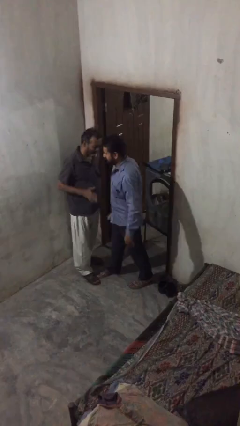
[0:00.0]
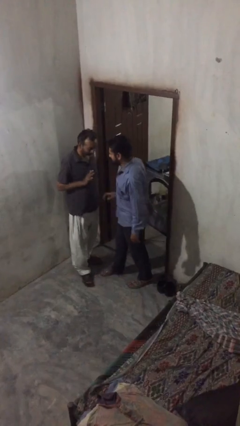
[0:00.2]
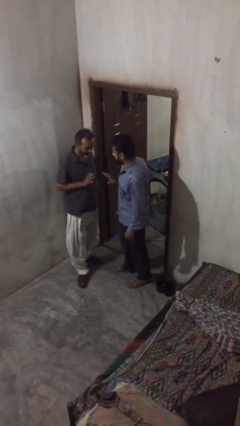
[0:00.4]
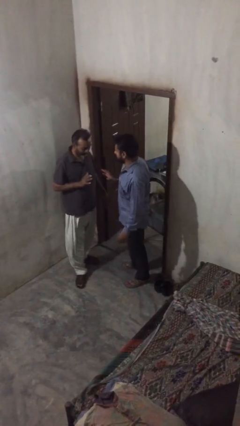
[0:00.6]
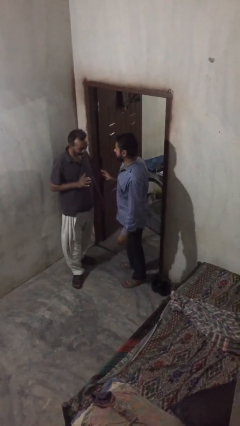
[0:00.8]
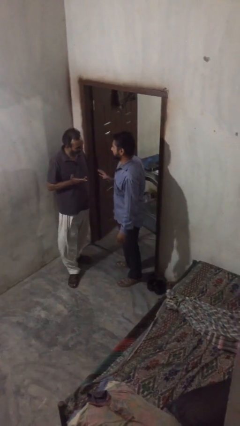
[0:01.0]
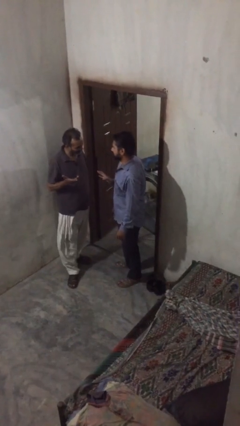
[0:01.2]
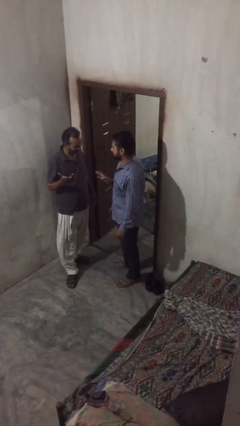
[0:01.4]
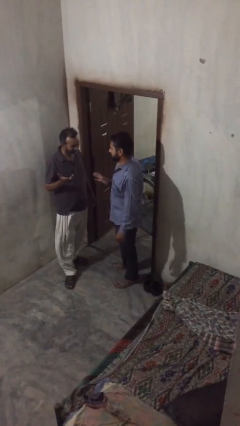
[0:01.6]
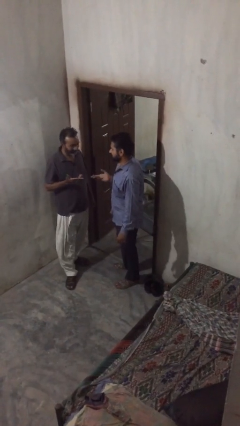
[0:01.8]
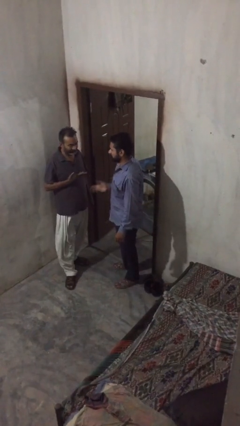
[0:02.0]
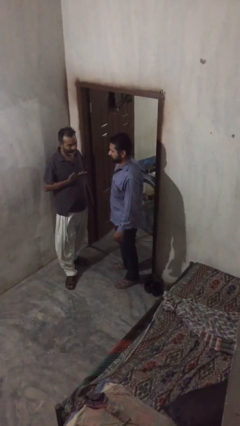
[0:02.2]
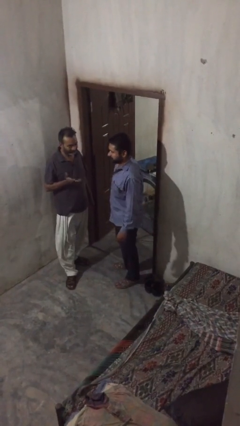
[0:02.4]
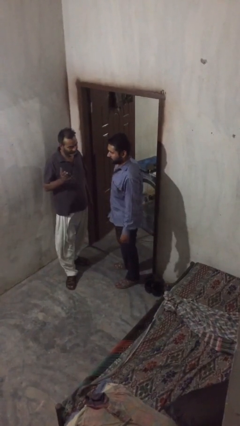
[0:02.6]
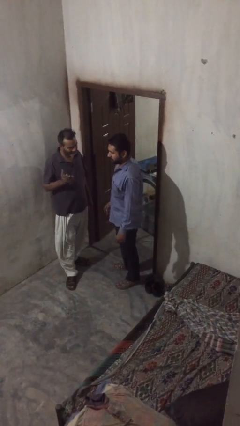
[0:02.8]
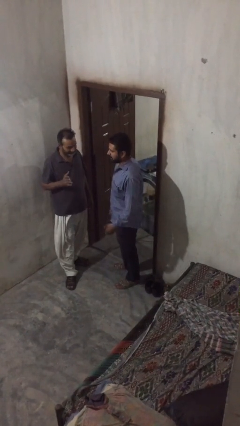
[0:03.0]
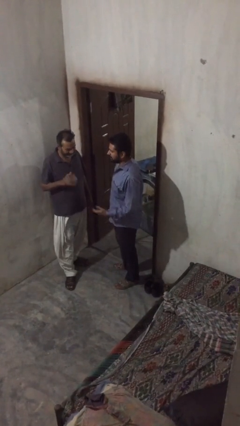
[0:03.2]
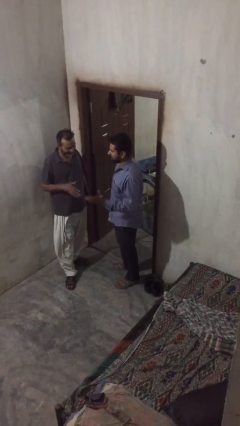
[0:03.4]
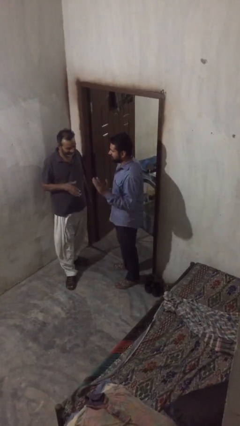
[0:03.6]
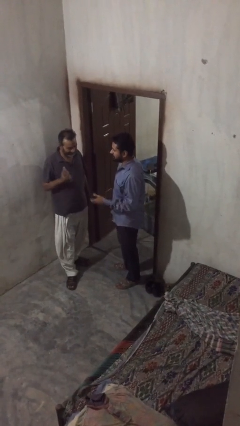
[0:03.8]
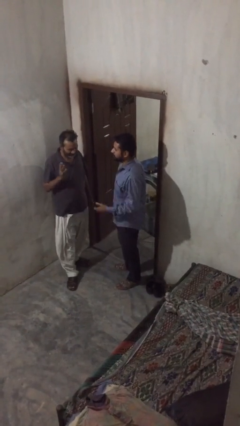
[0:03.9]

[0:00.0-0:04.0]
person talks to person

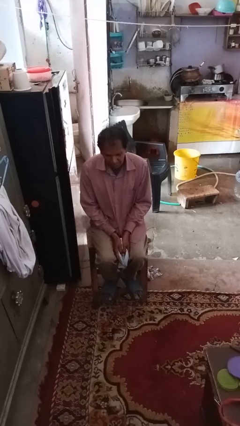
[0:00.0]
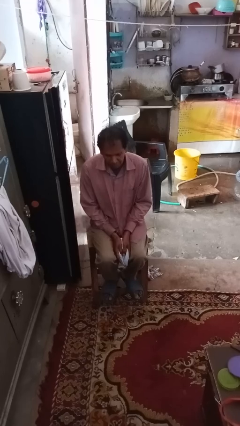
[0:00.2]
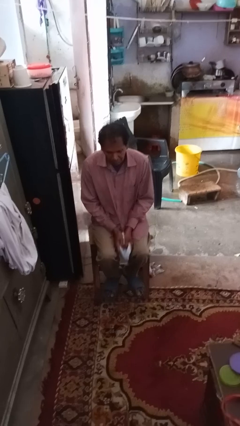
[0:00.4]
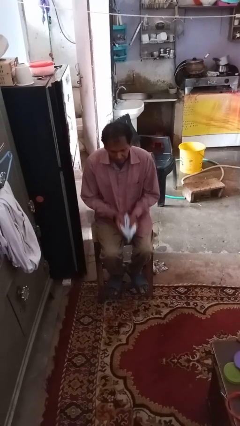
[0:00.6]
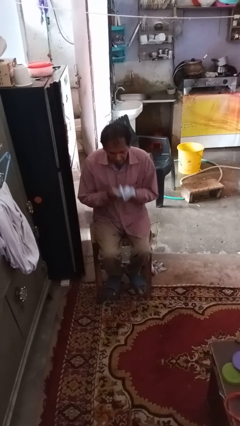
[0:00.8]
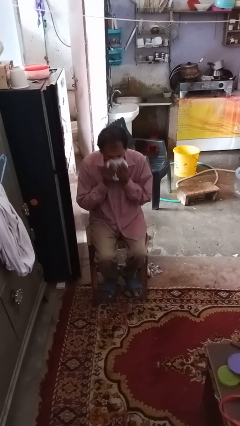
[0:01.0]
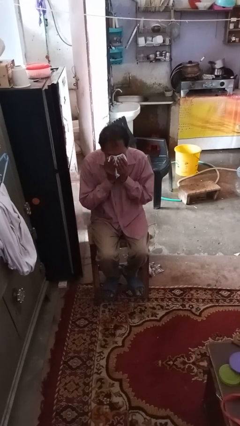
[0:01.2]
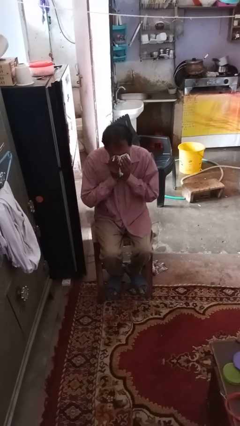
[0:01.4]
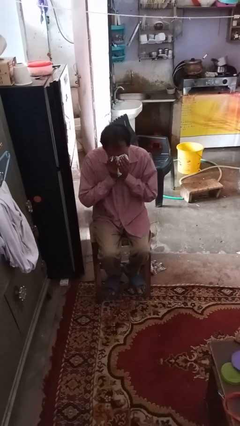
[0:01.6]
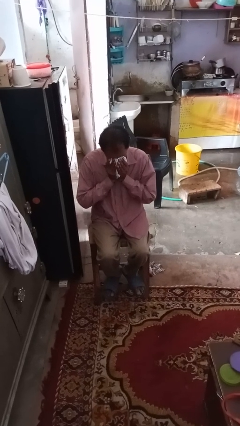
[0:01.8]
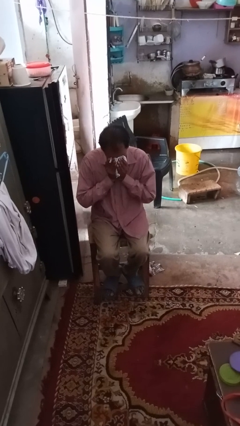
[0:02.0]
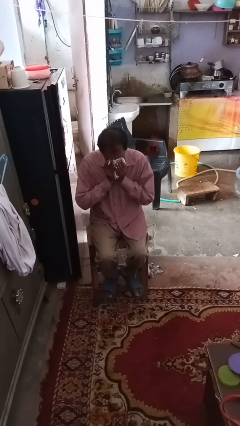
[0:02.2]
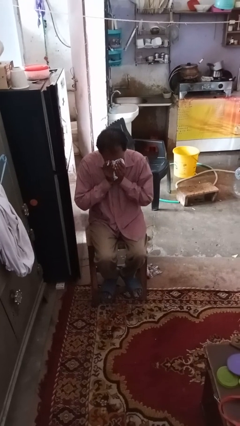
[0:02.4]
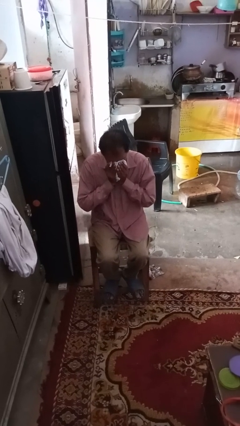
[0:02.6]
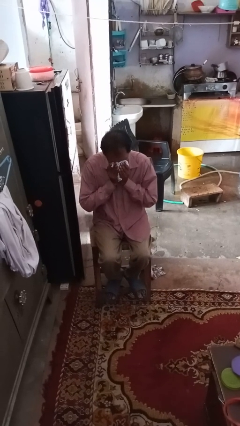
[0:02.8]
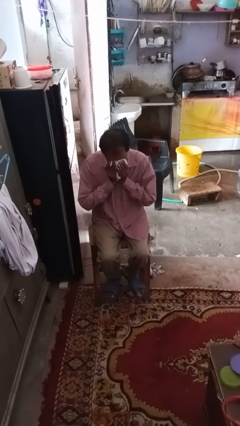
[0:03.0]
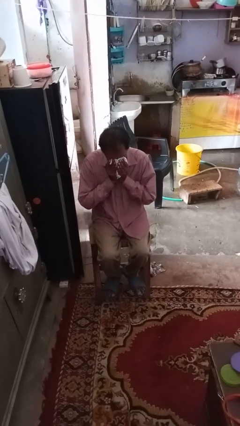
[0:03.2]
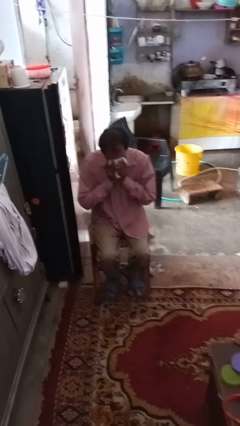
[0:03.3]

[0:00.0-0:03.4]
person blows nose

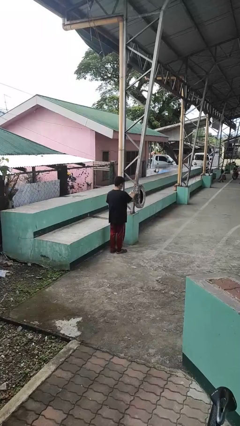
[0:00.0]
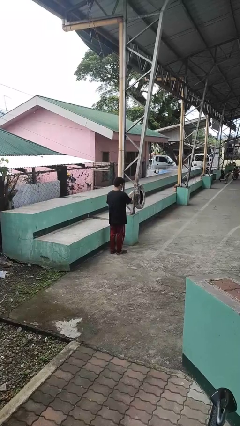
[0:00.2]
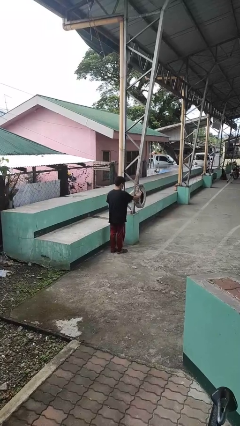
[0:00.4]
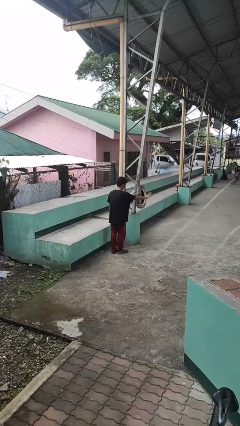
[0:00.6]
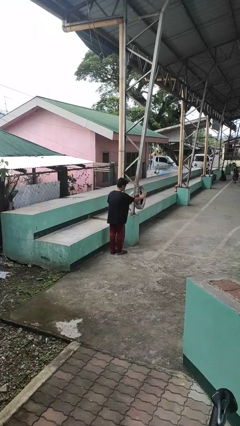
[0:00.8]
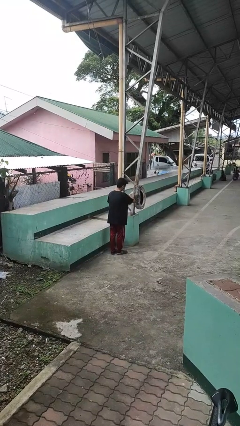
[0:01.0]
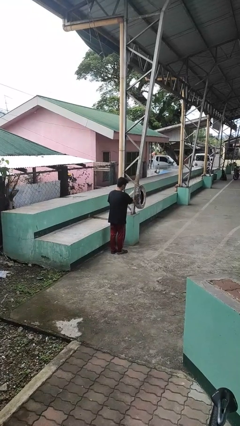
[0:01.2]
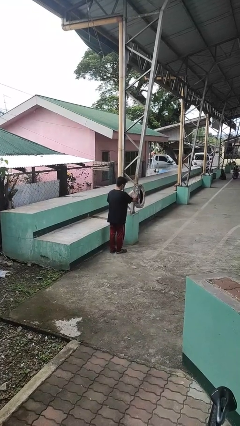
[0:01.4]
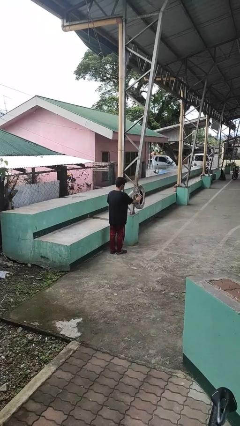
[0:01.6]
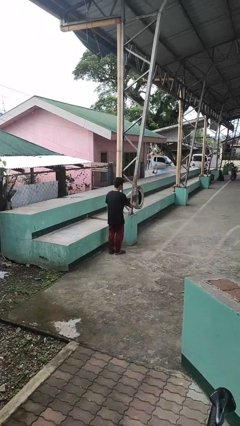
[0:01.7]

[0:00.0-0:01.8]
person waves hand over object

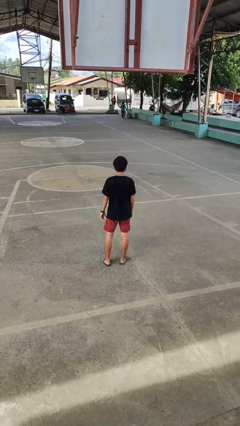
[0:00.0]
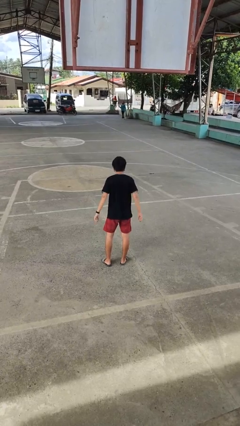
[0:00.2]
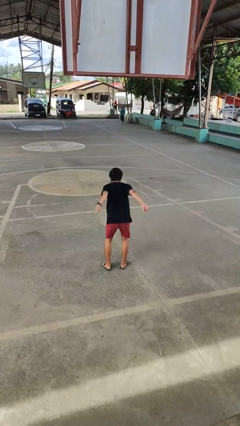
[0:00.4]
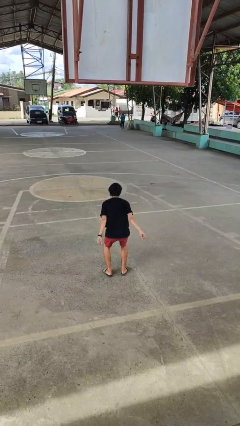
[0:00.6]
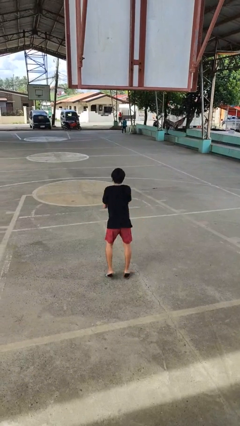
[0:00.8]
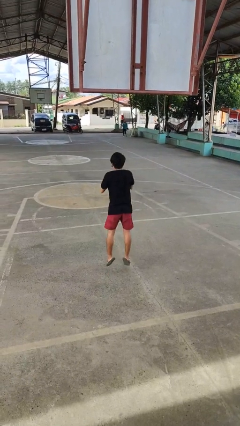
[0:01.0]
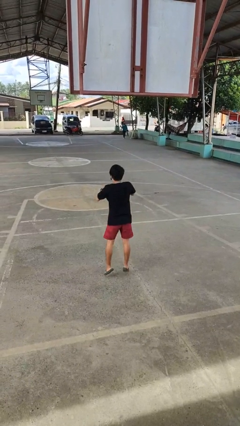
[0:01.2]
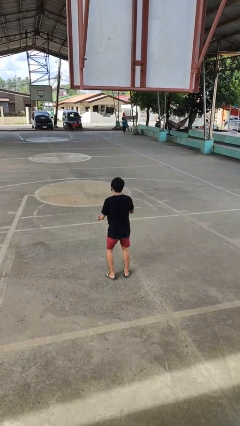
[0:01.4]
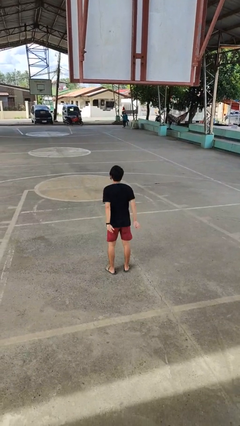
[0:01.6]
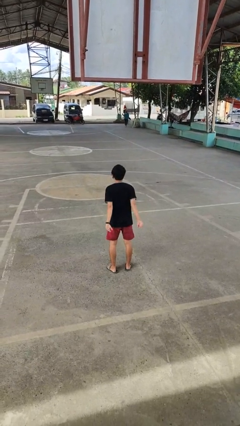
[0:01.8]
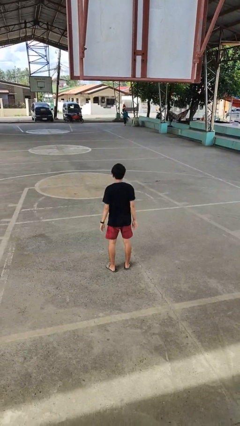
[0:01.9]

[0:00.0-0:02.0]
person jumps

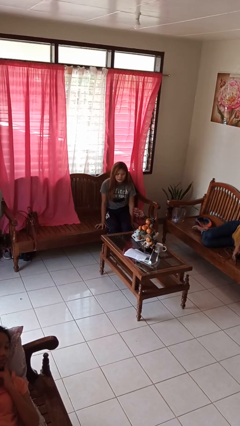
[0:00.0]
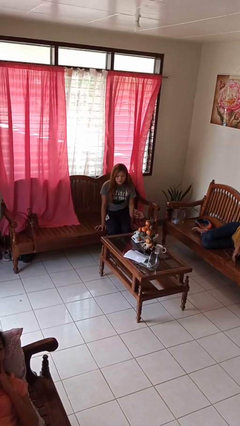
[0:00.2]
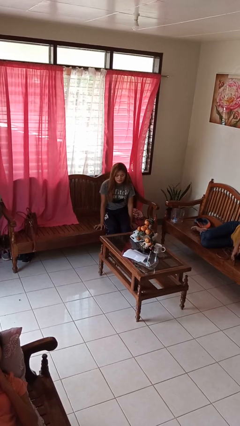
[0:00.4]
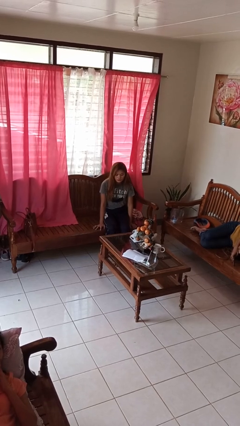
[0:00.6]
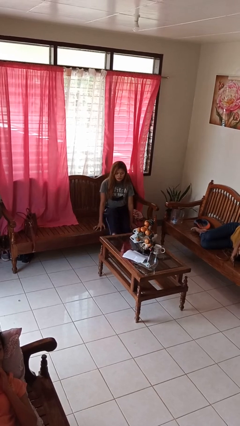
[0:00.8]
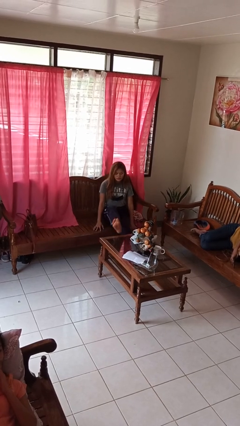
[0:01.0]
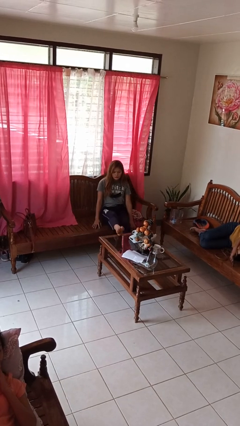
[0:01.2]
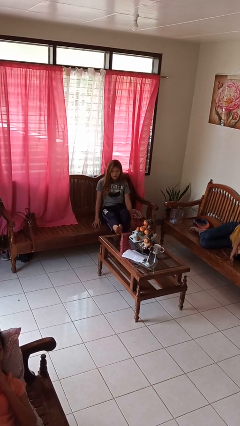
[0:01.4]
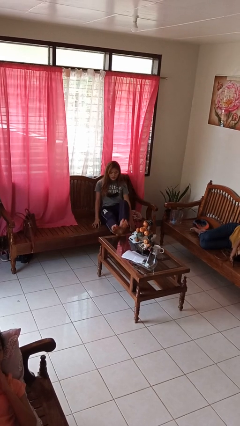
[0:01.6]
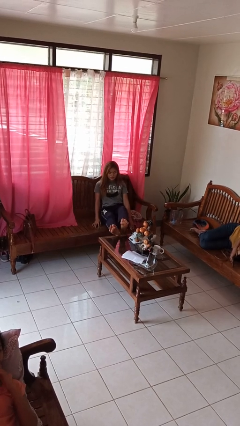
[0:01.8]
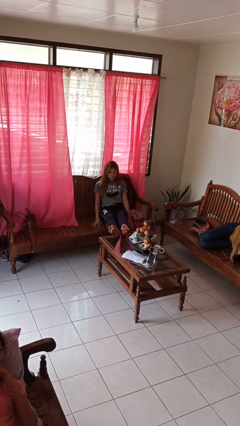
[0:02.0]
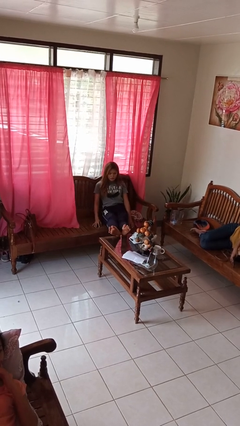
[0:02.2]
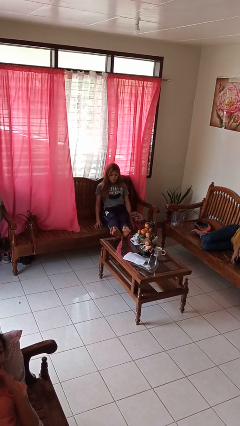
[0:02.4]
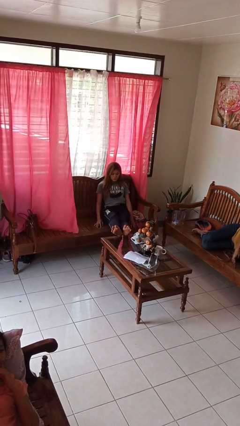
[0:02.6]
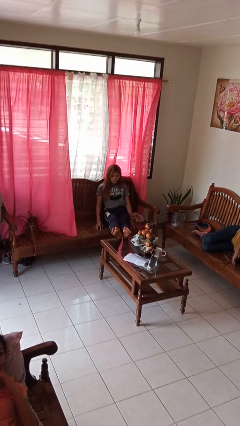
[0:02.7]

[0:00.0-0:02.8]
person puts feet up

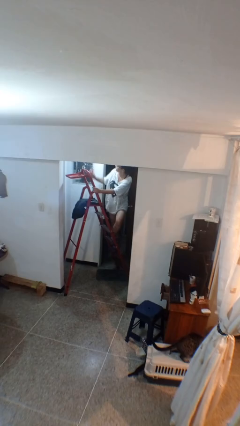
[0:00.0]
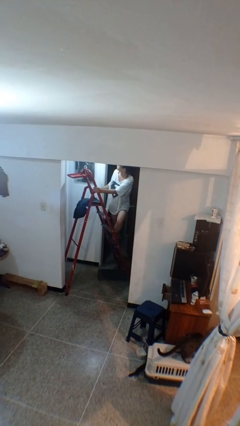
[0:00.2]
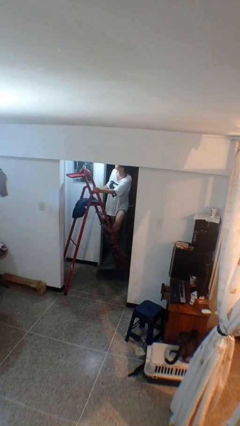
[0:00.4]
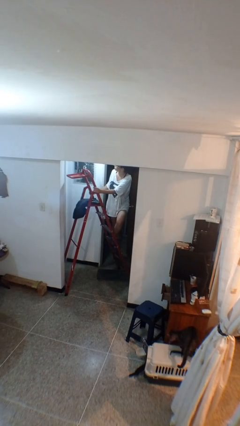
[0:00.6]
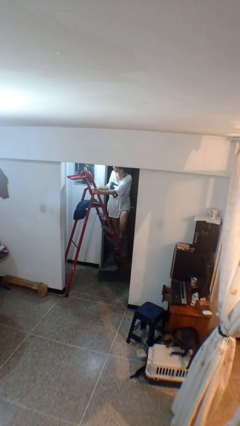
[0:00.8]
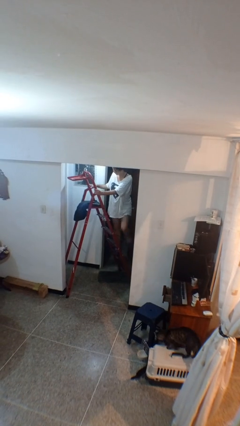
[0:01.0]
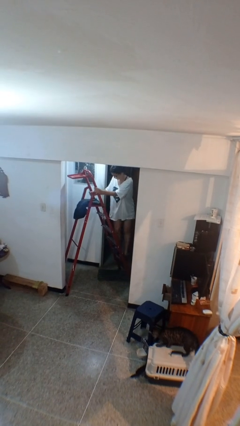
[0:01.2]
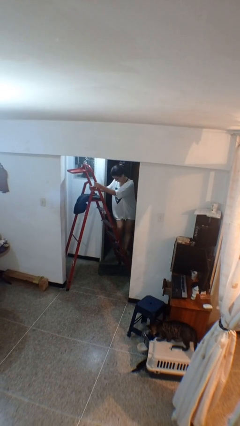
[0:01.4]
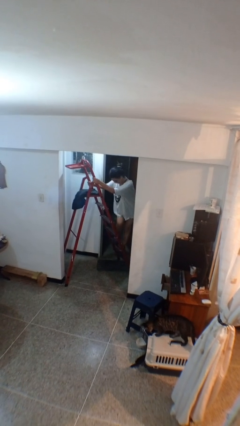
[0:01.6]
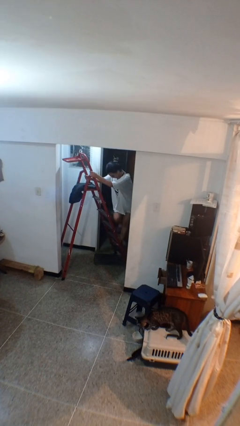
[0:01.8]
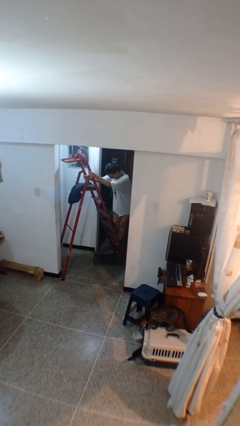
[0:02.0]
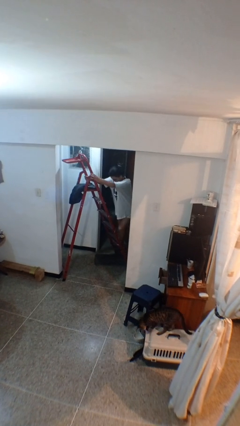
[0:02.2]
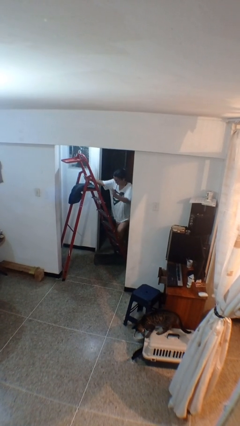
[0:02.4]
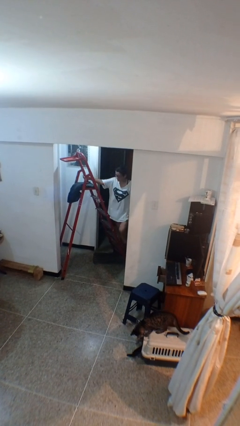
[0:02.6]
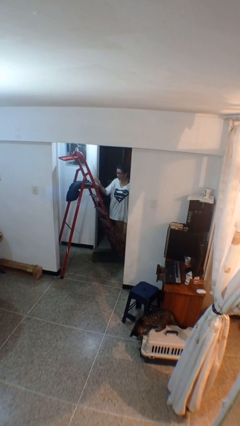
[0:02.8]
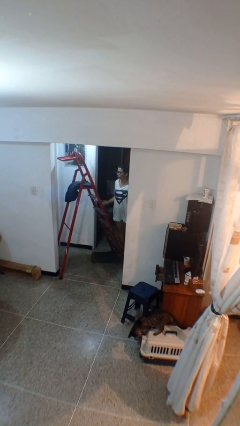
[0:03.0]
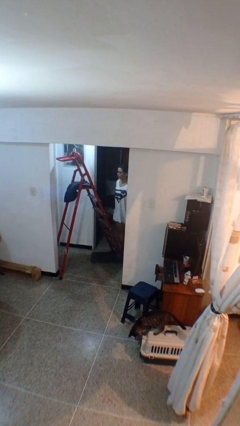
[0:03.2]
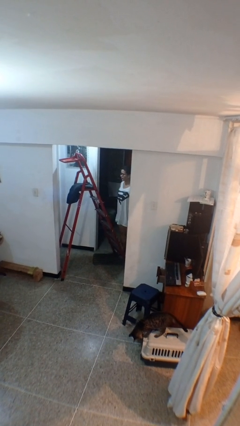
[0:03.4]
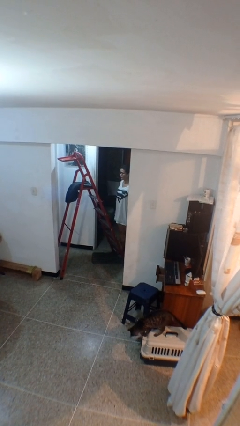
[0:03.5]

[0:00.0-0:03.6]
person climbs down ladder
